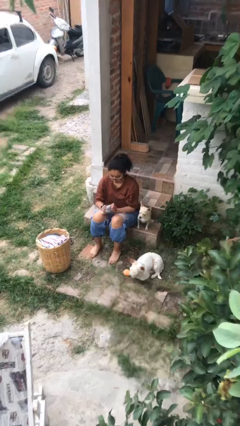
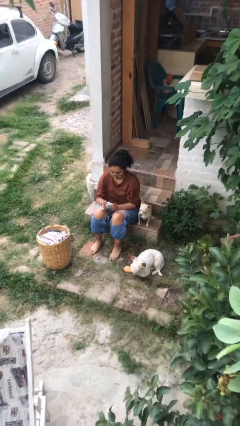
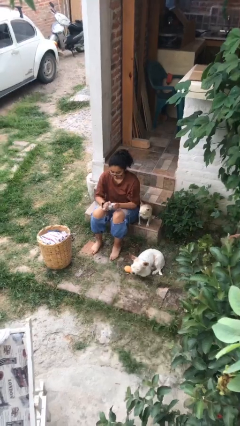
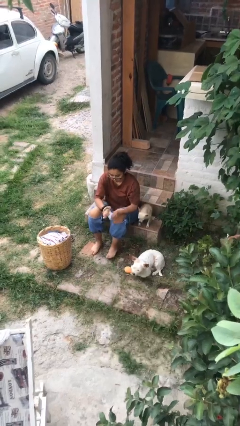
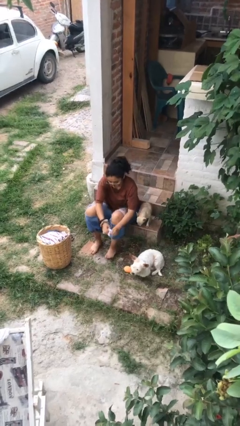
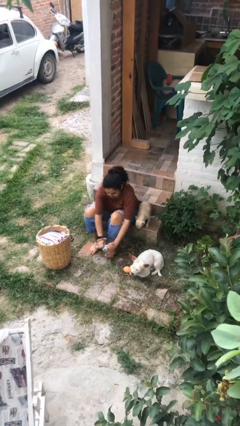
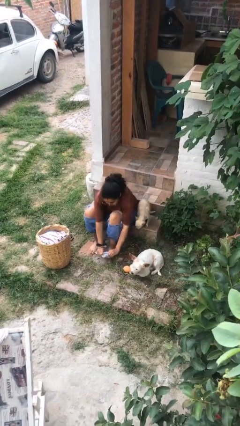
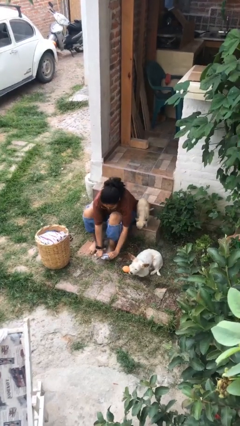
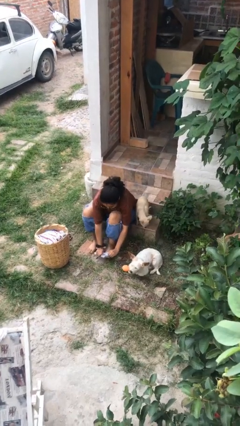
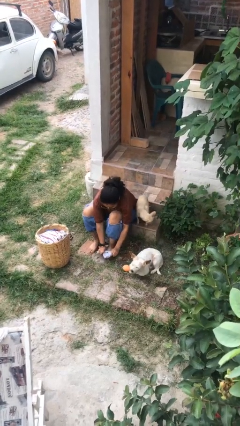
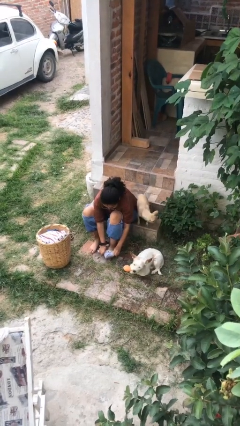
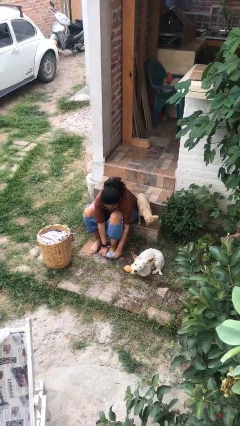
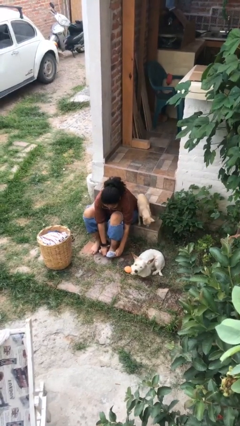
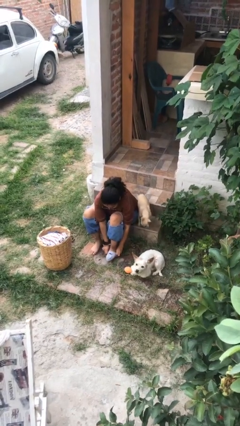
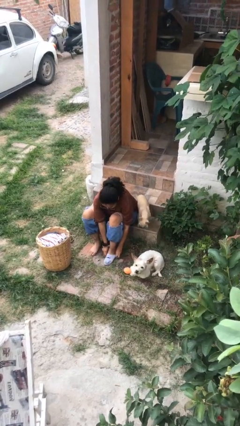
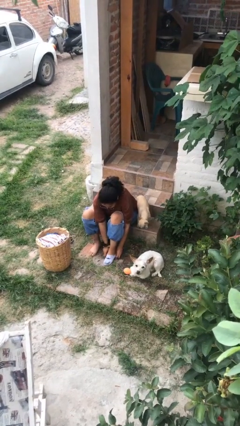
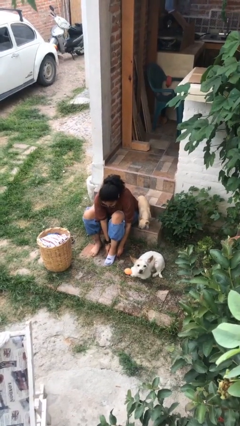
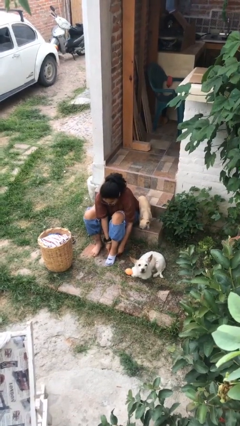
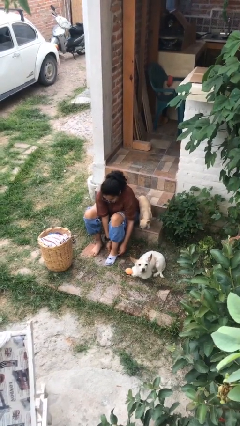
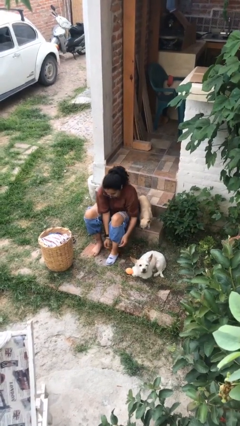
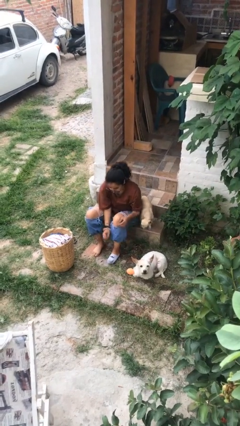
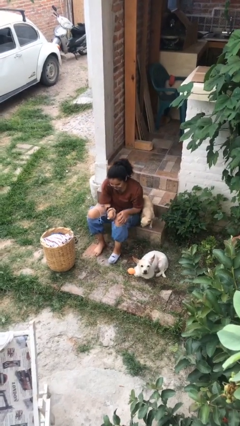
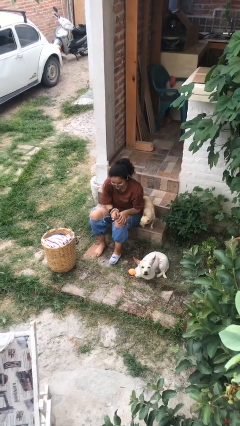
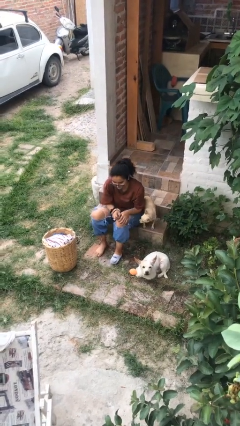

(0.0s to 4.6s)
person puts on socks

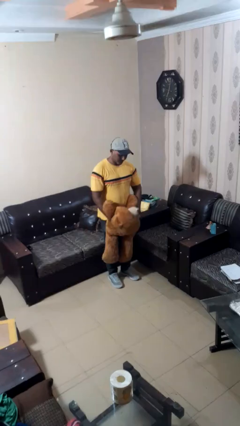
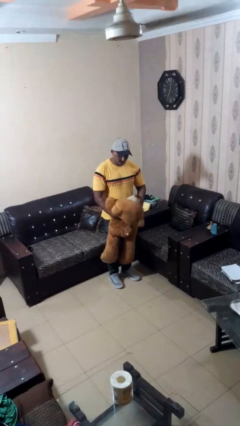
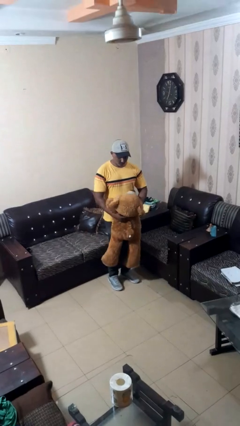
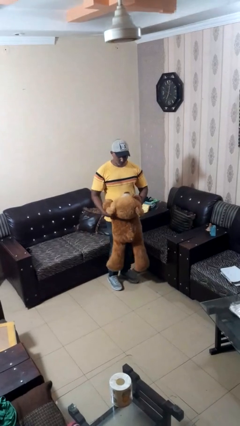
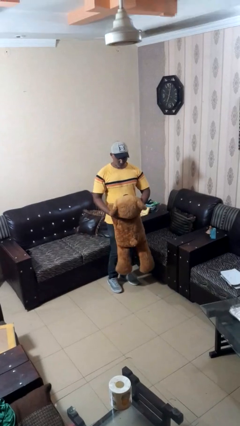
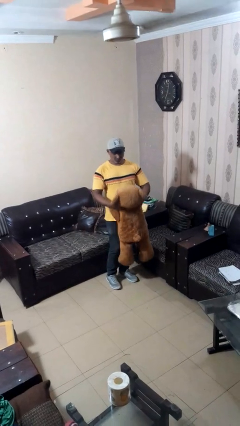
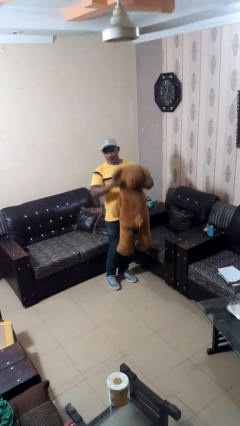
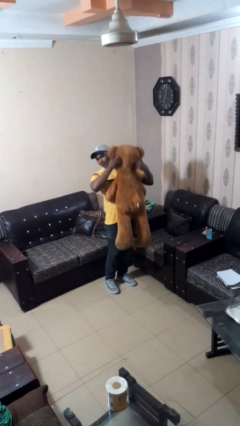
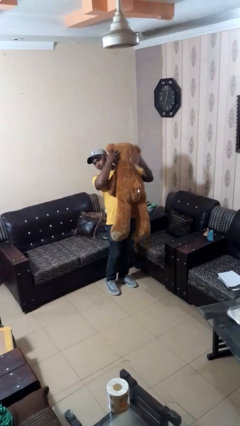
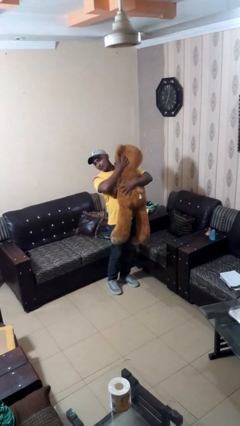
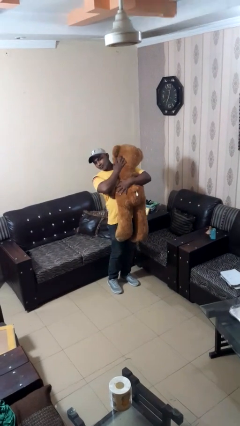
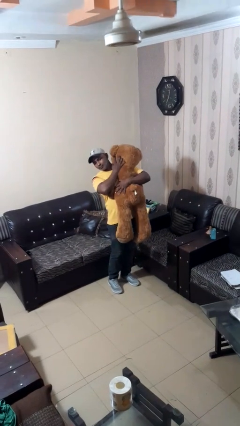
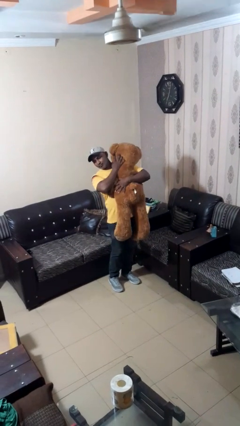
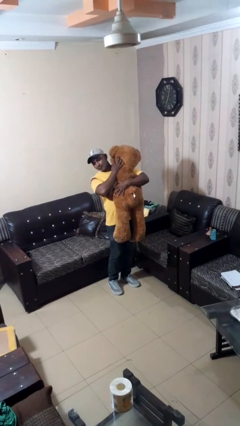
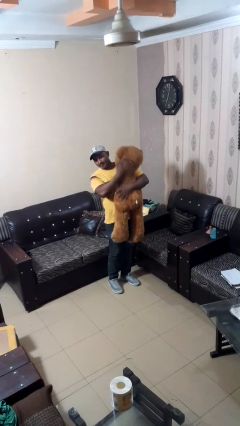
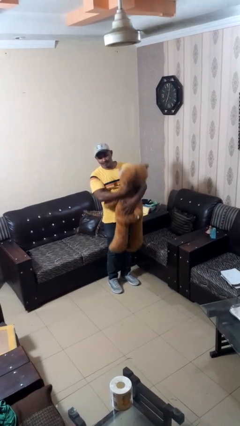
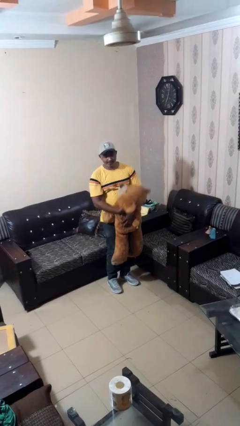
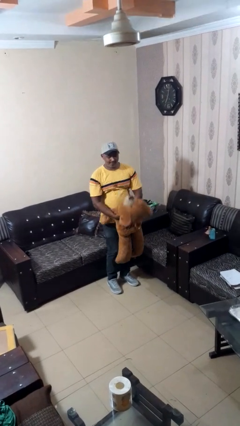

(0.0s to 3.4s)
person hugs stuffed animal

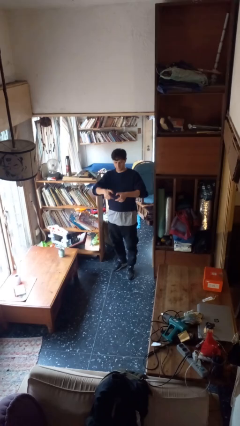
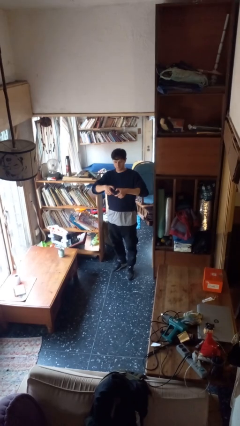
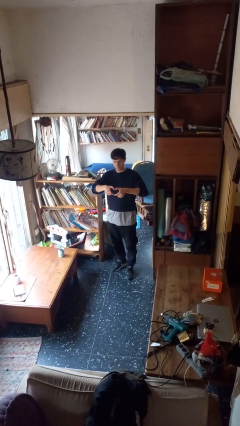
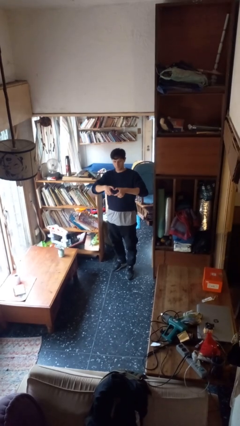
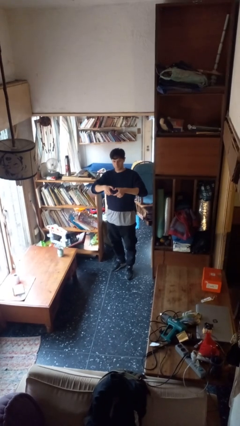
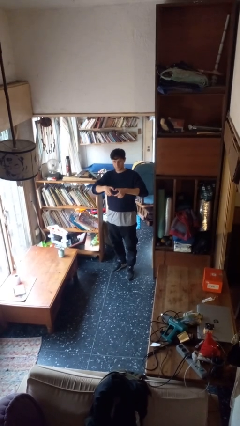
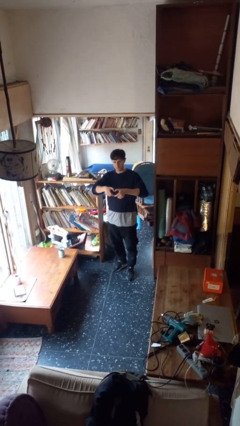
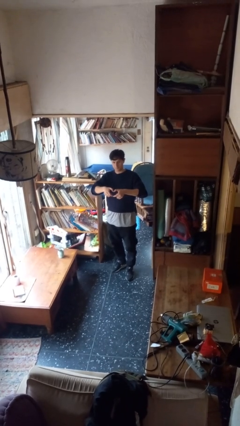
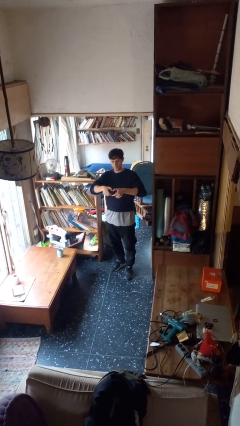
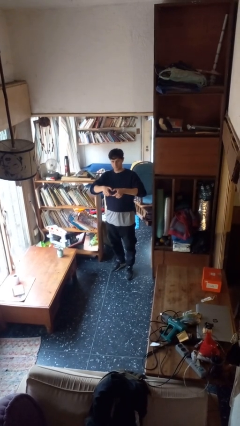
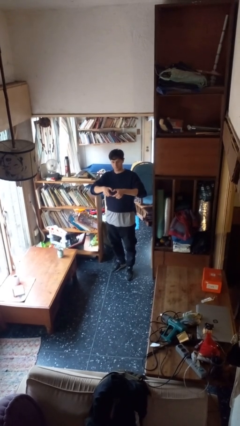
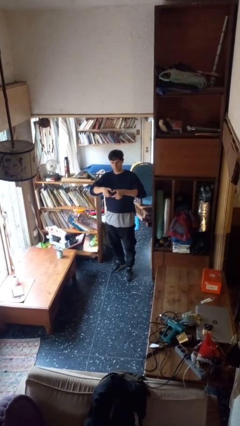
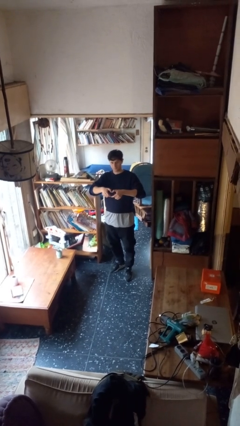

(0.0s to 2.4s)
person gestures heart

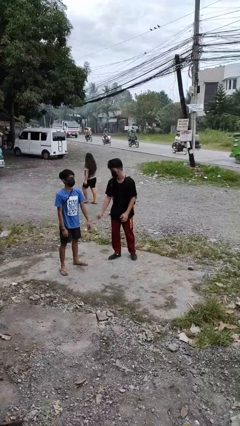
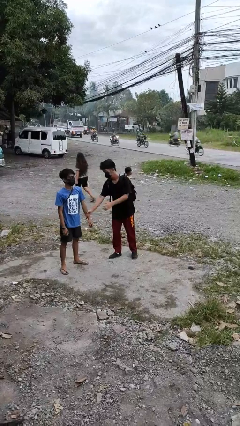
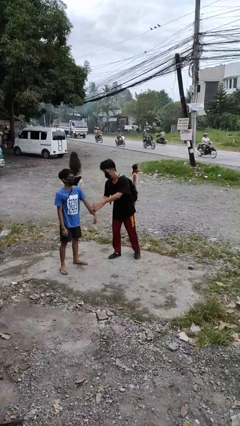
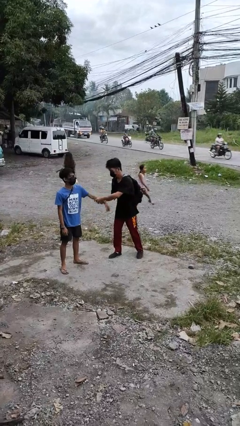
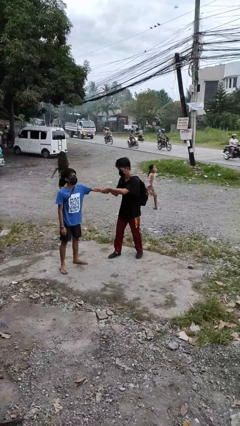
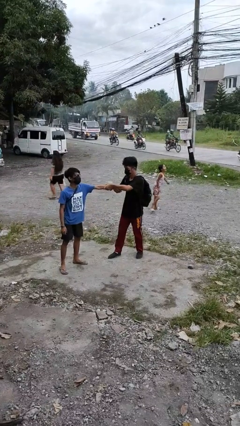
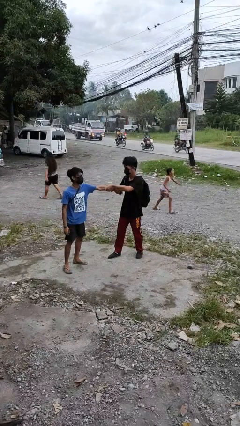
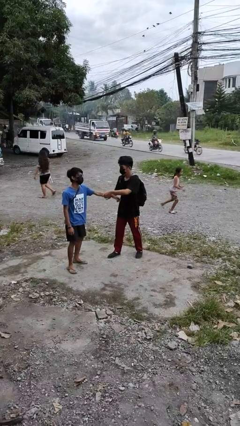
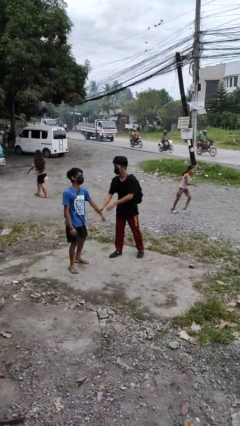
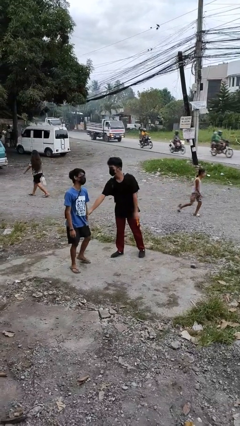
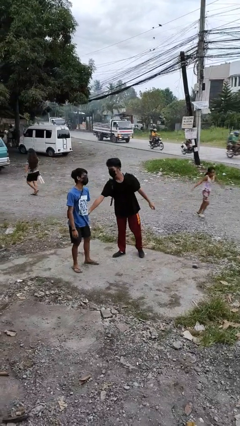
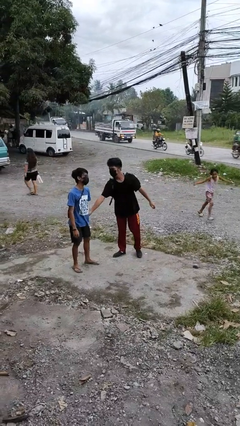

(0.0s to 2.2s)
person grabs person by forearm

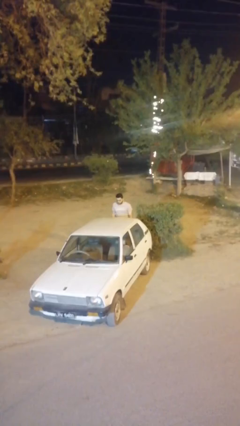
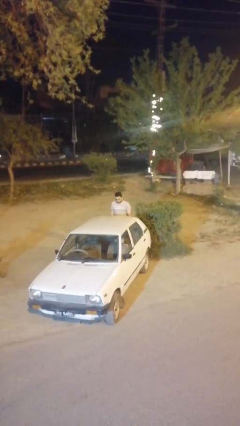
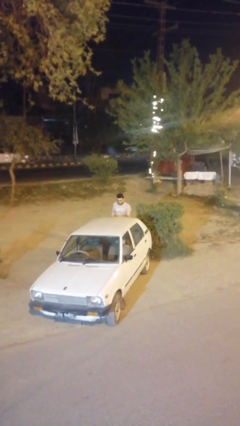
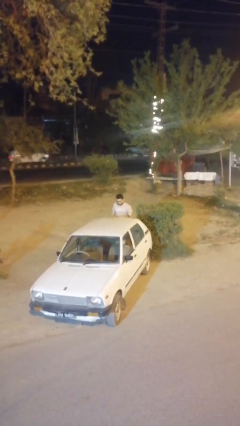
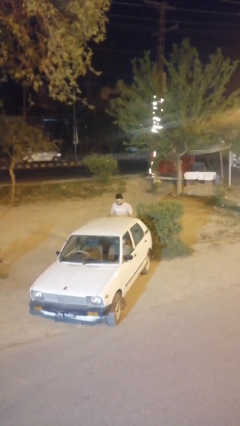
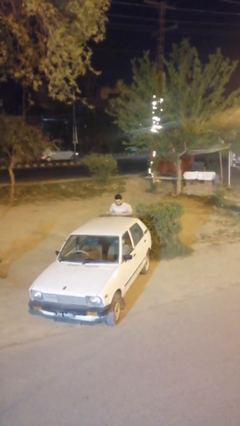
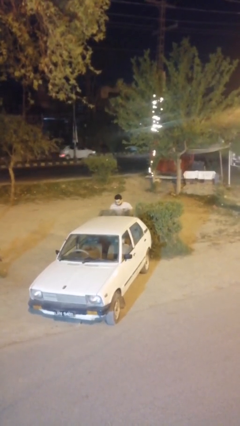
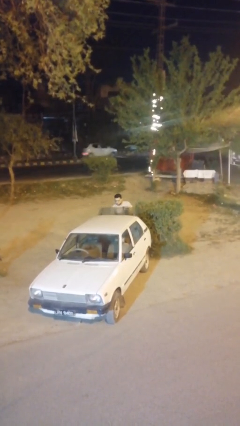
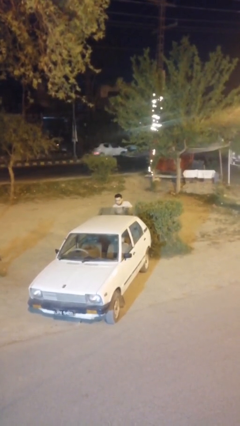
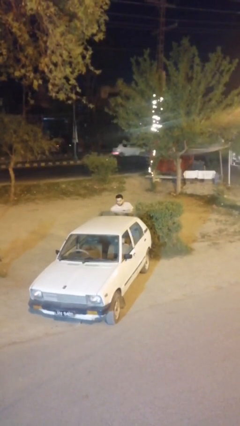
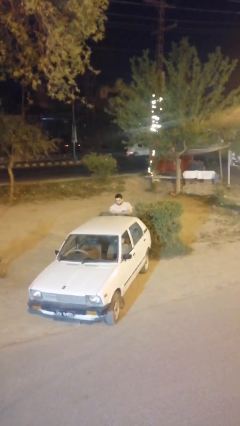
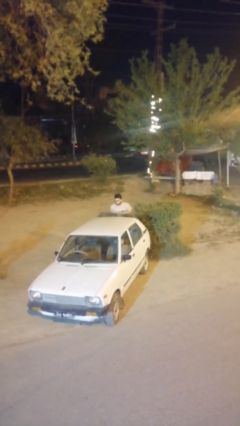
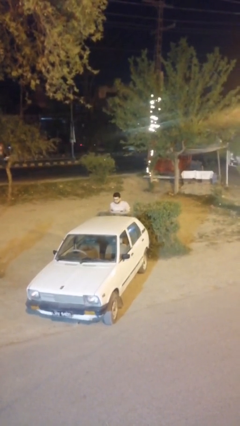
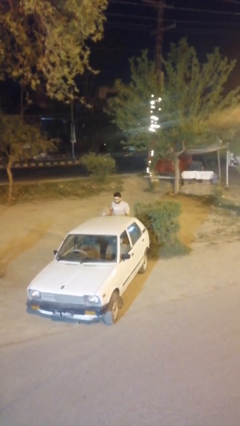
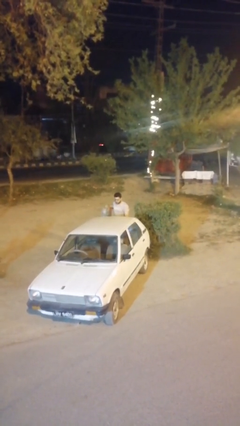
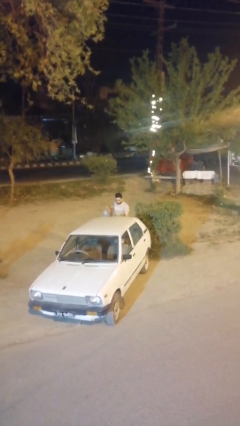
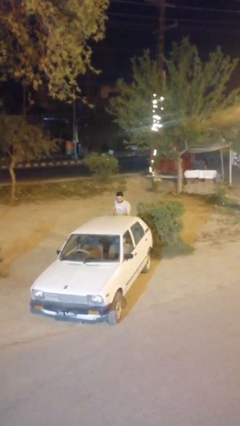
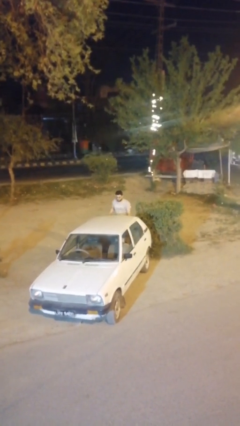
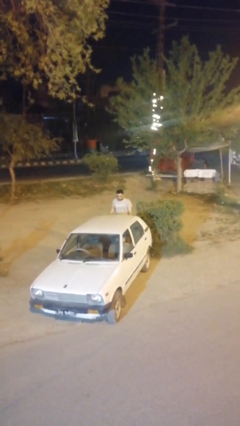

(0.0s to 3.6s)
person unloads car

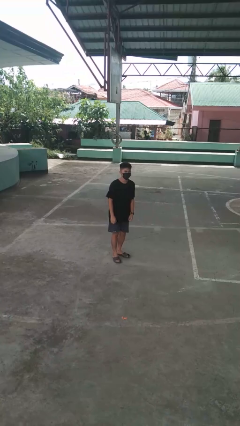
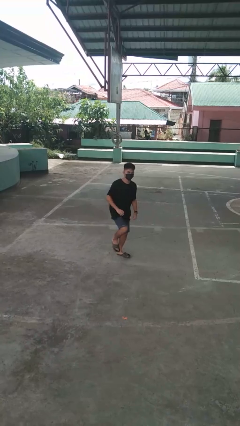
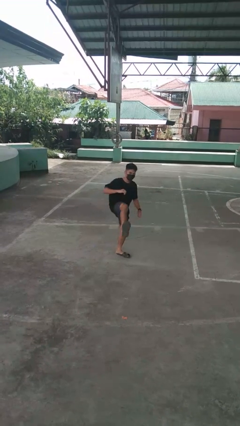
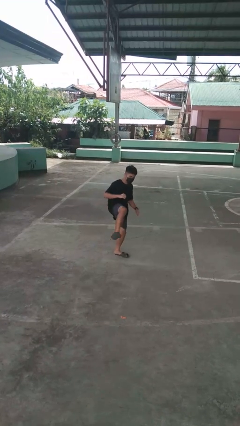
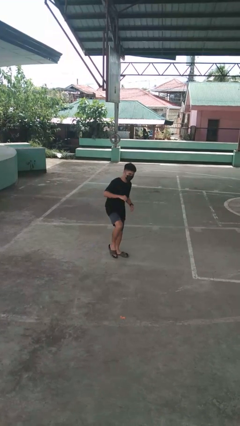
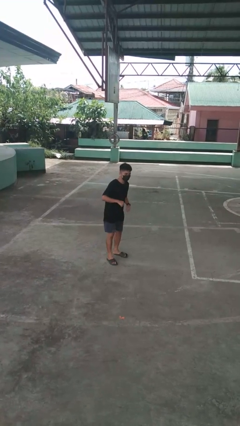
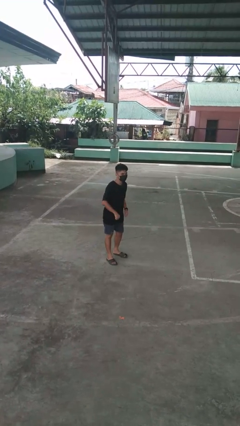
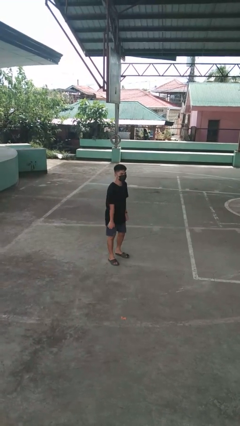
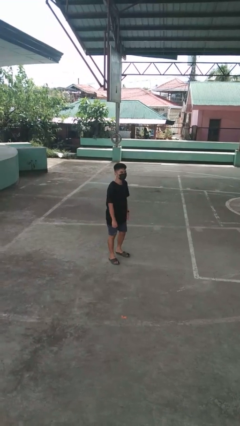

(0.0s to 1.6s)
person karate kicks
